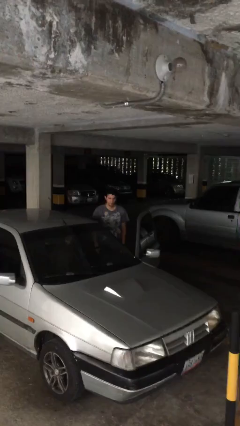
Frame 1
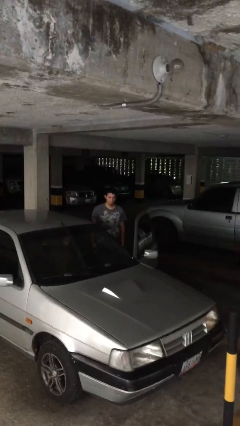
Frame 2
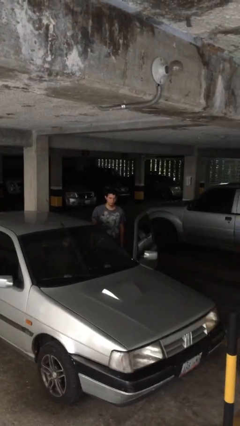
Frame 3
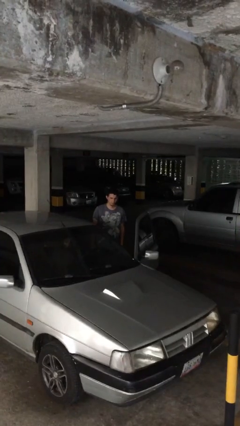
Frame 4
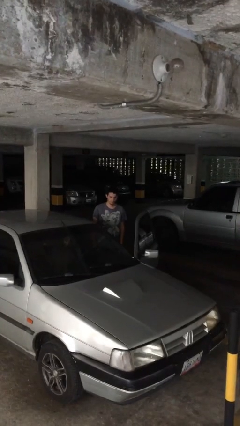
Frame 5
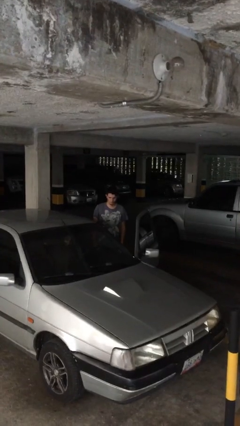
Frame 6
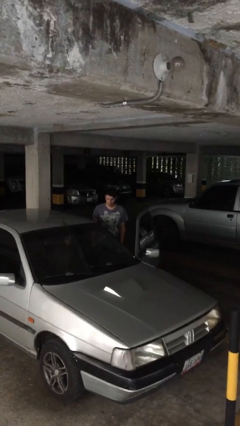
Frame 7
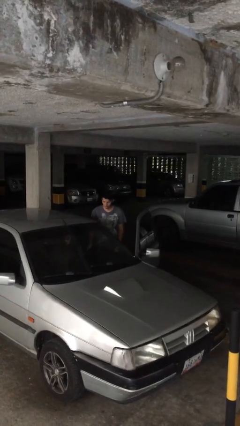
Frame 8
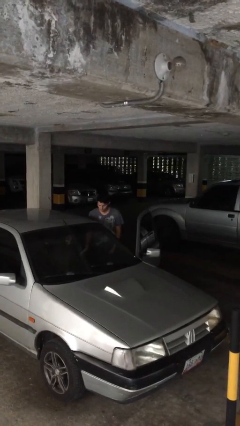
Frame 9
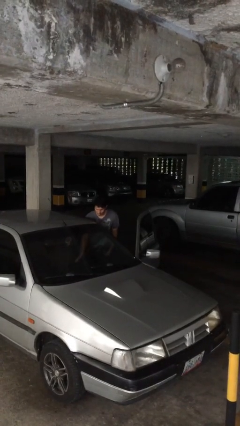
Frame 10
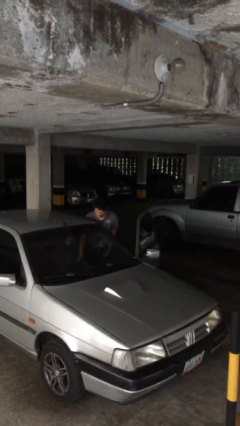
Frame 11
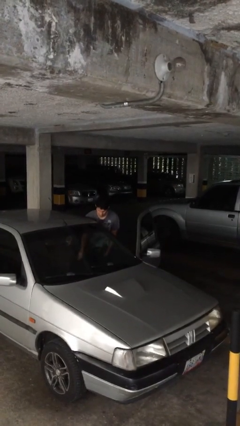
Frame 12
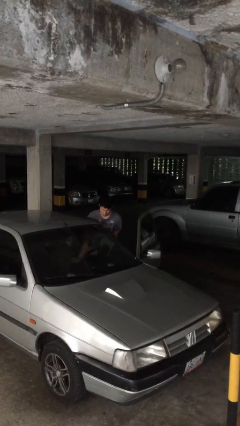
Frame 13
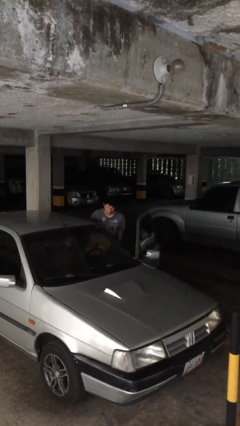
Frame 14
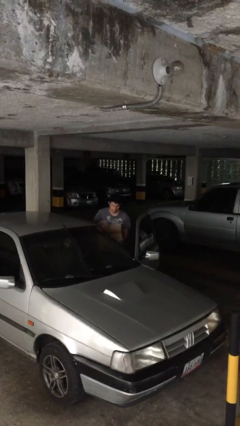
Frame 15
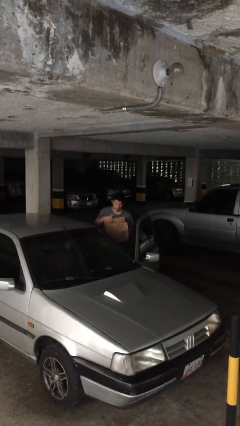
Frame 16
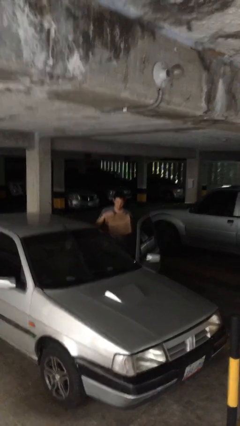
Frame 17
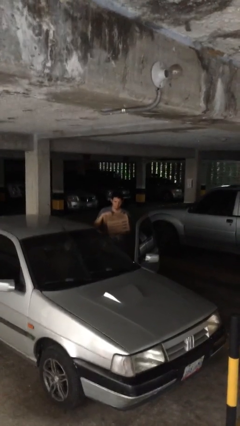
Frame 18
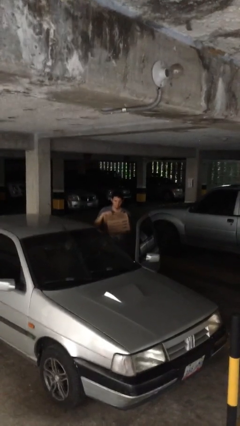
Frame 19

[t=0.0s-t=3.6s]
person unloads car

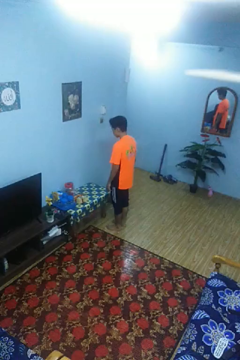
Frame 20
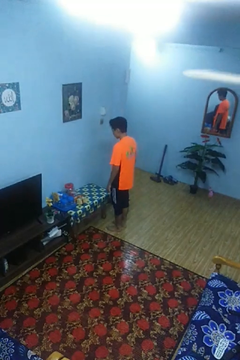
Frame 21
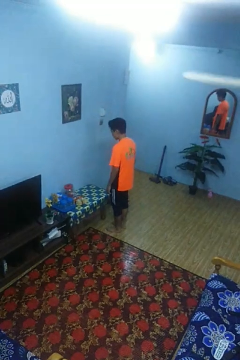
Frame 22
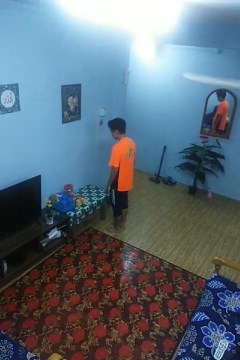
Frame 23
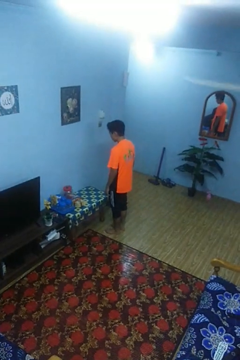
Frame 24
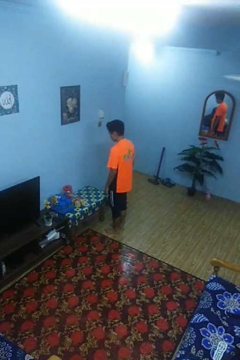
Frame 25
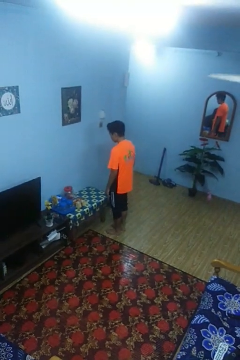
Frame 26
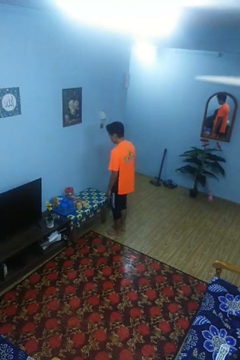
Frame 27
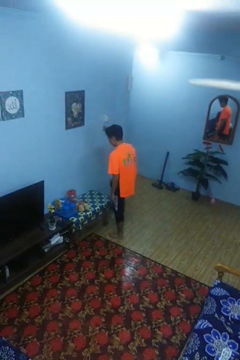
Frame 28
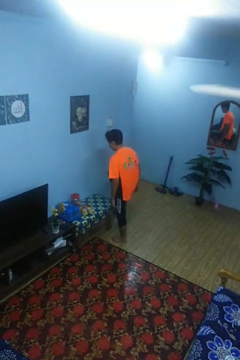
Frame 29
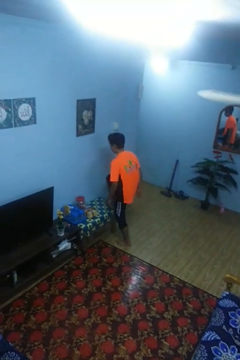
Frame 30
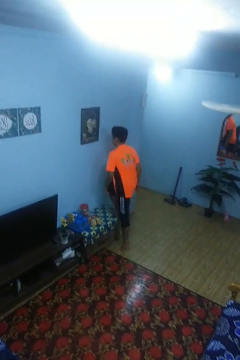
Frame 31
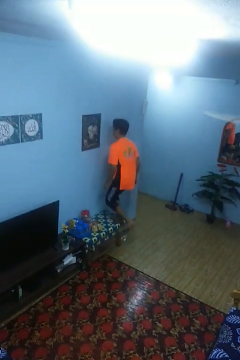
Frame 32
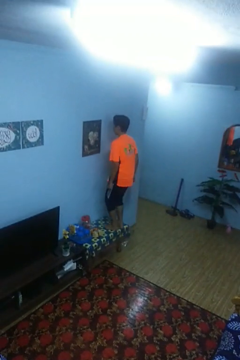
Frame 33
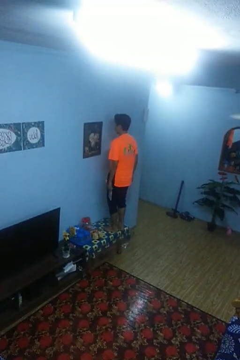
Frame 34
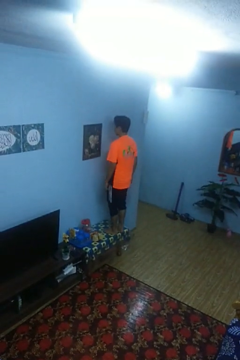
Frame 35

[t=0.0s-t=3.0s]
person climbs on table

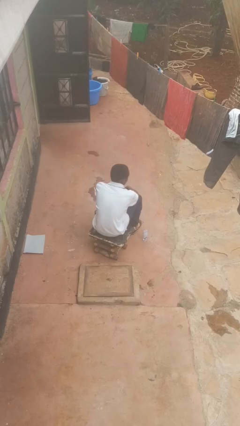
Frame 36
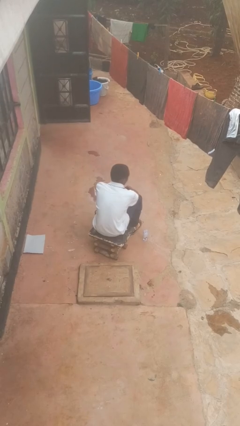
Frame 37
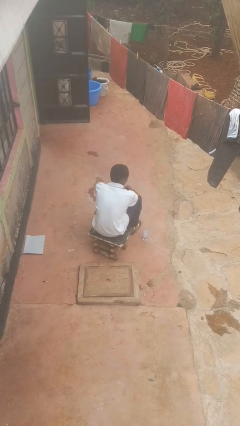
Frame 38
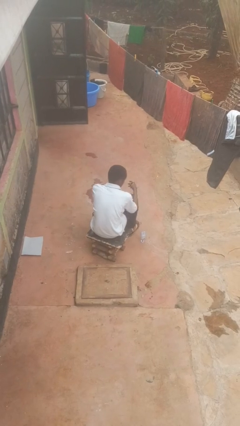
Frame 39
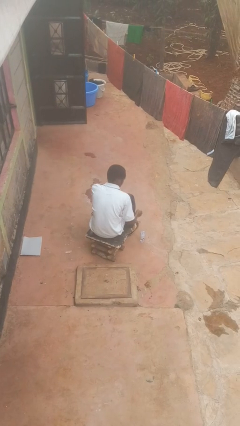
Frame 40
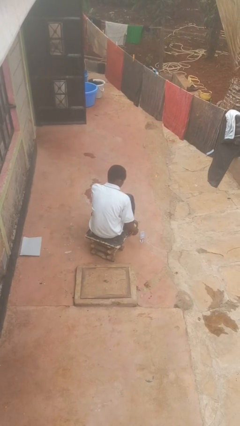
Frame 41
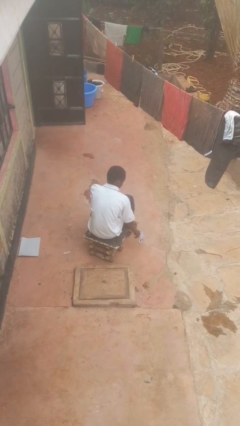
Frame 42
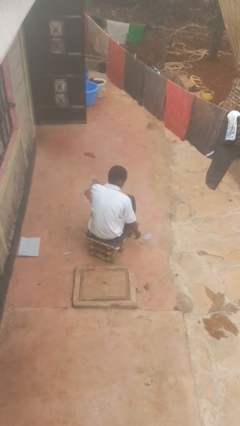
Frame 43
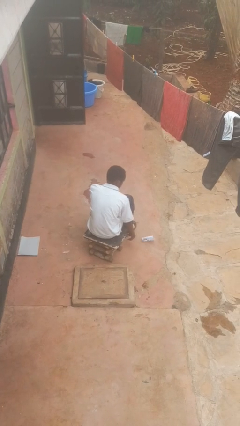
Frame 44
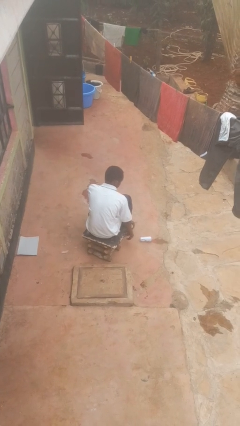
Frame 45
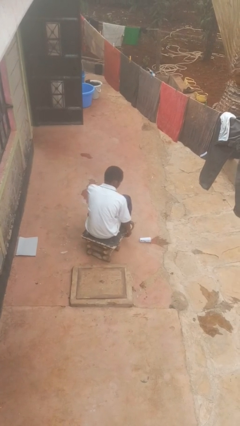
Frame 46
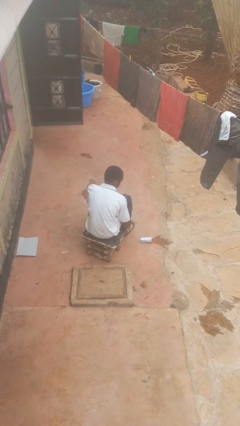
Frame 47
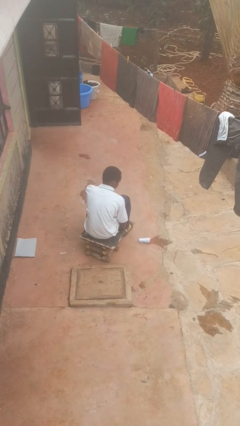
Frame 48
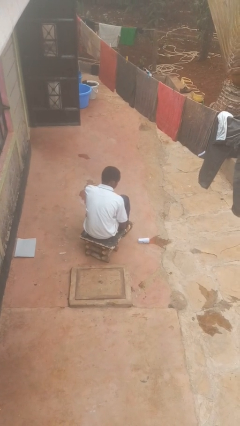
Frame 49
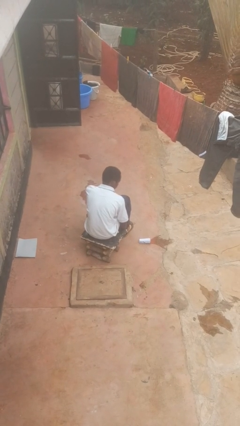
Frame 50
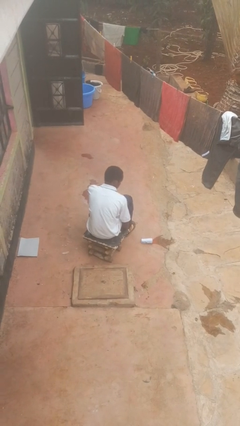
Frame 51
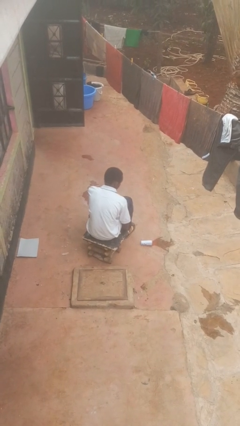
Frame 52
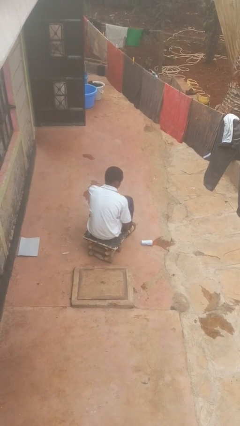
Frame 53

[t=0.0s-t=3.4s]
person spills on floor

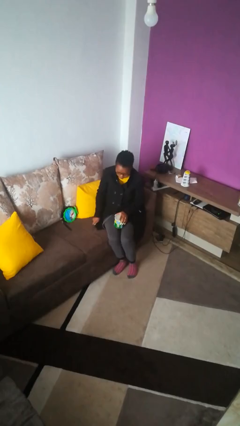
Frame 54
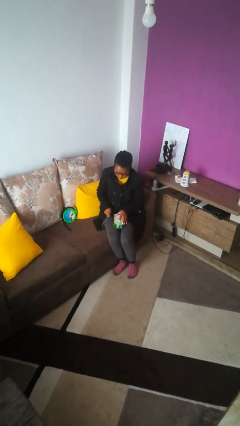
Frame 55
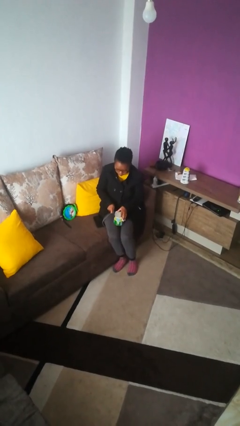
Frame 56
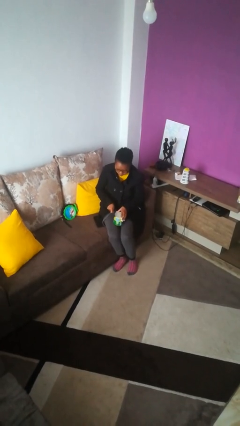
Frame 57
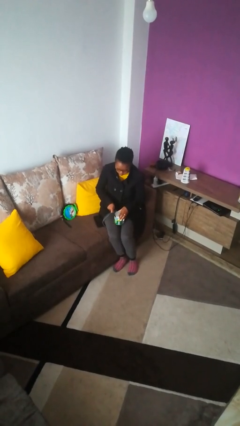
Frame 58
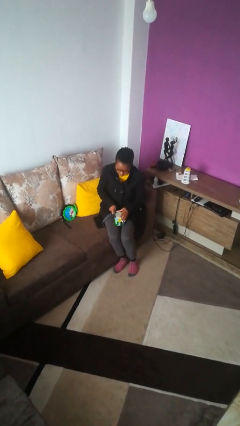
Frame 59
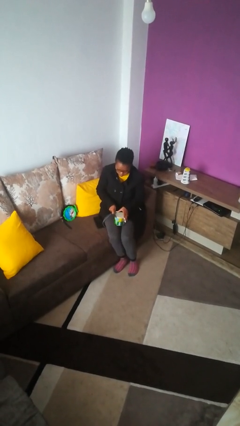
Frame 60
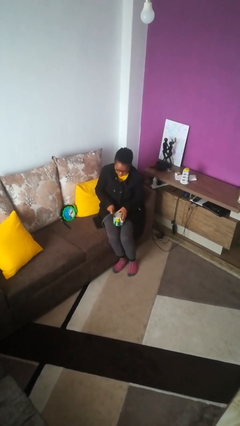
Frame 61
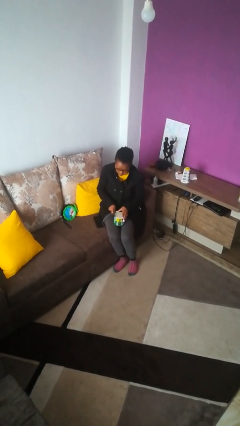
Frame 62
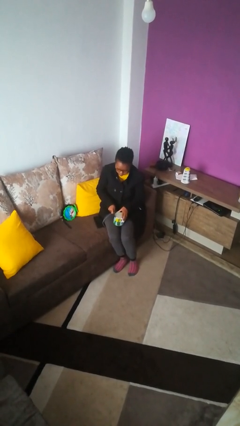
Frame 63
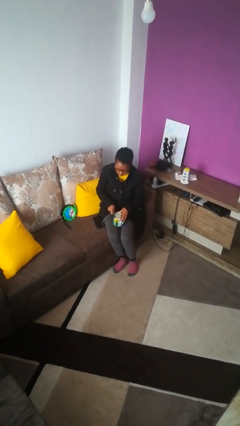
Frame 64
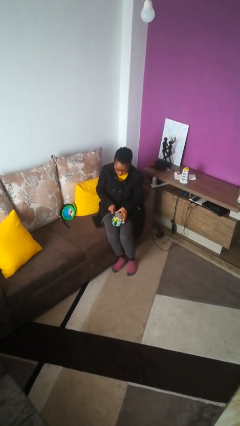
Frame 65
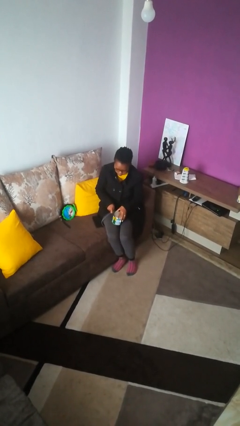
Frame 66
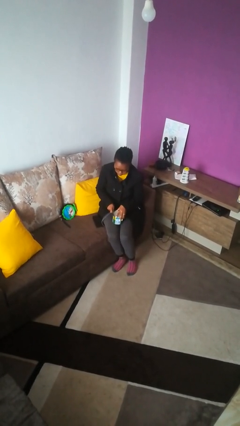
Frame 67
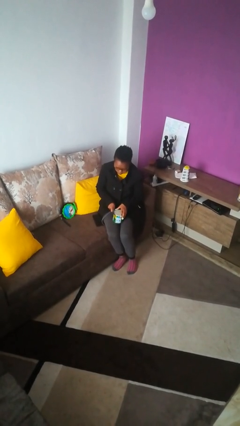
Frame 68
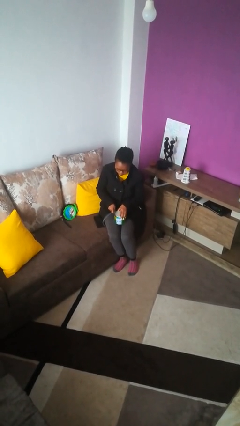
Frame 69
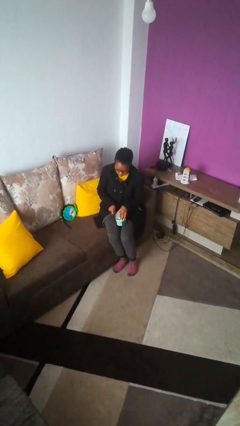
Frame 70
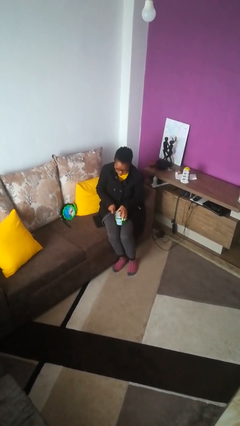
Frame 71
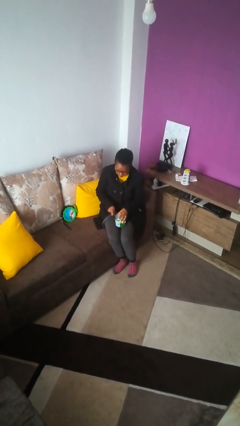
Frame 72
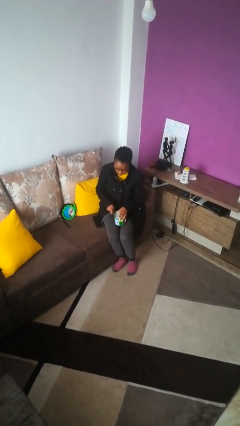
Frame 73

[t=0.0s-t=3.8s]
person opens can with can opener

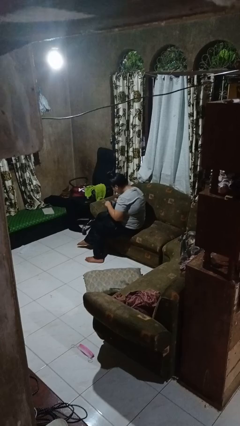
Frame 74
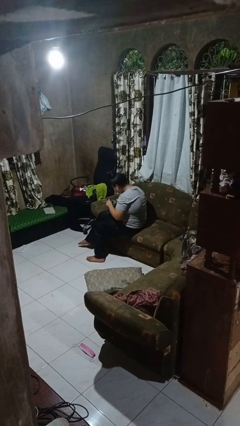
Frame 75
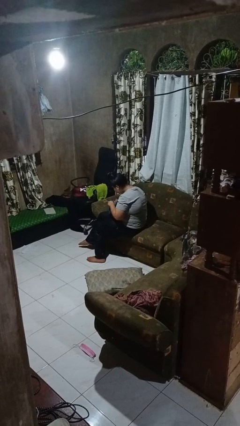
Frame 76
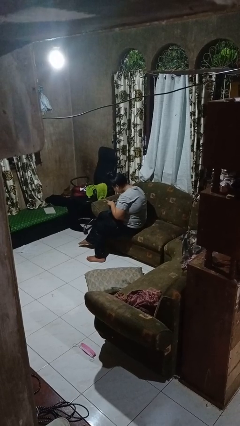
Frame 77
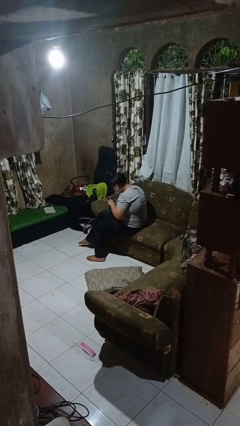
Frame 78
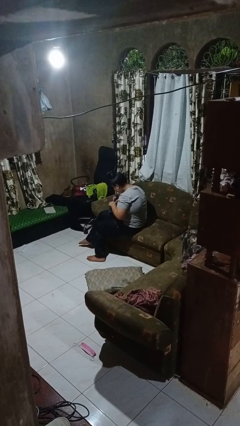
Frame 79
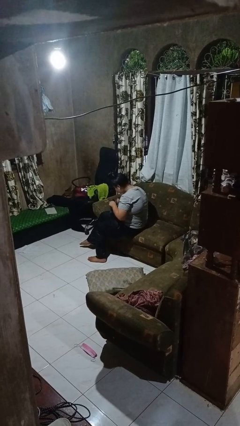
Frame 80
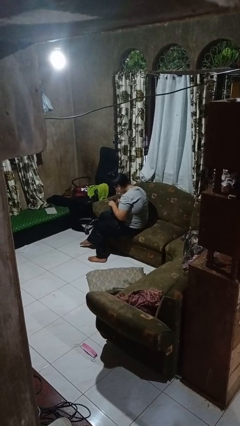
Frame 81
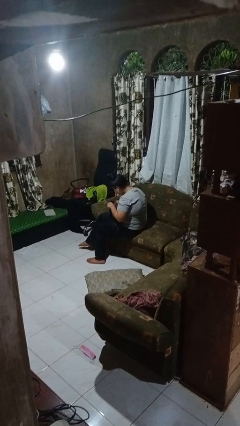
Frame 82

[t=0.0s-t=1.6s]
person searches in purse

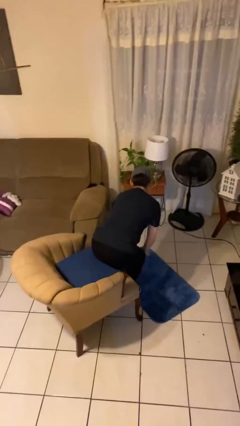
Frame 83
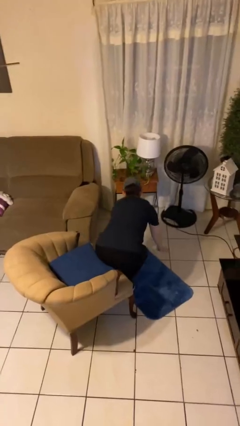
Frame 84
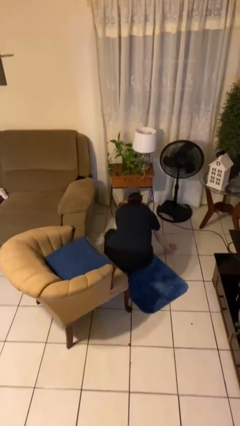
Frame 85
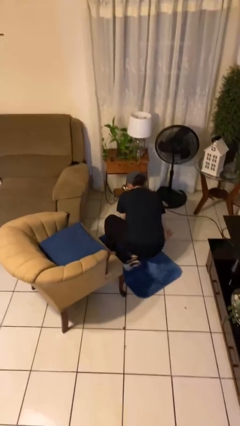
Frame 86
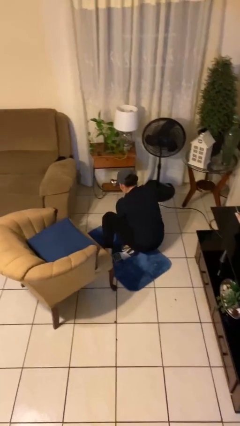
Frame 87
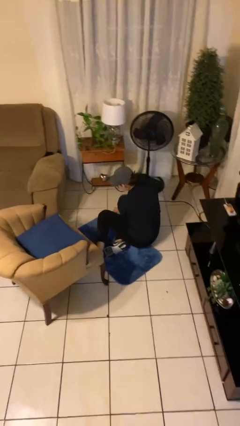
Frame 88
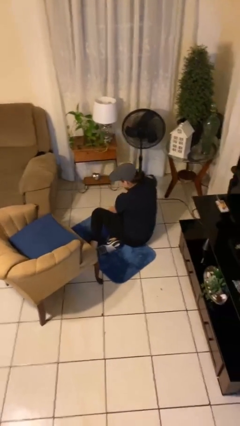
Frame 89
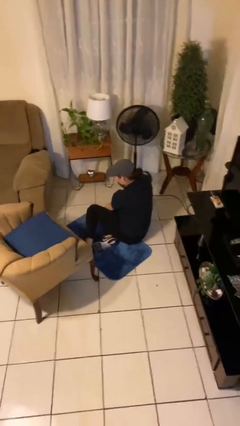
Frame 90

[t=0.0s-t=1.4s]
person falls from chair

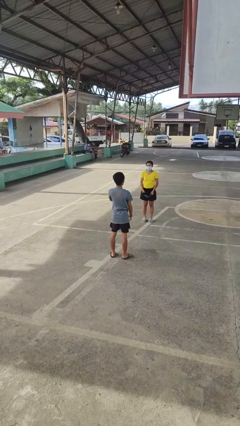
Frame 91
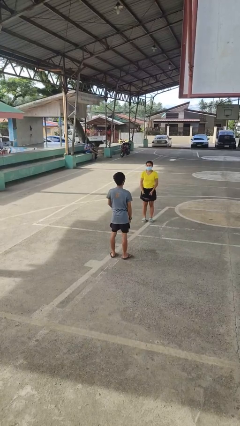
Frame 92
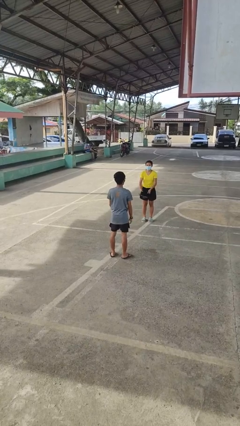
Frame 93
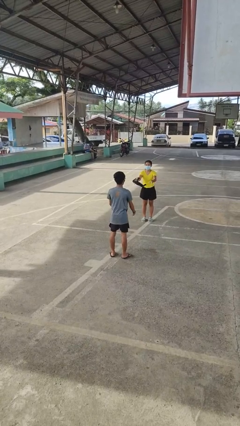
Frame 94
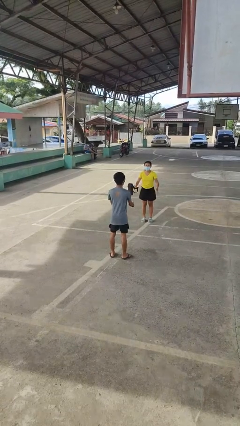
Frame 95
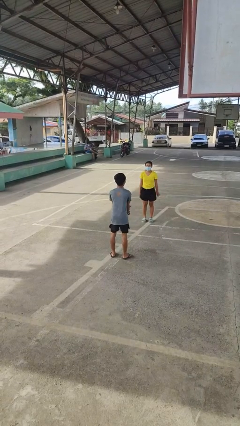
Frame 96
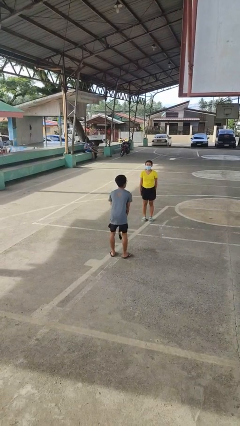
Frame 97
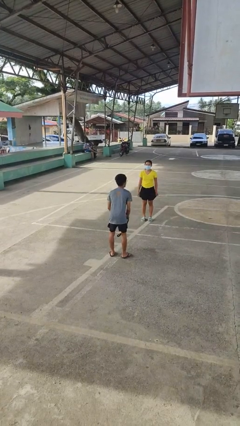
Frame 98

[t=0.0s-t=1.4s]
person catches object from person
